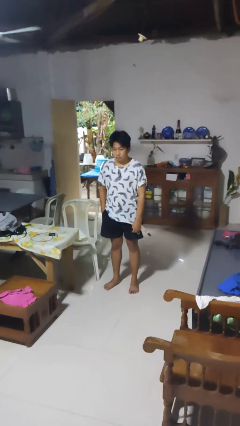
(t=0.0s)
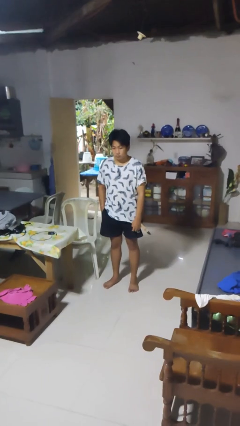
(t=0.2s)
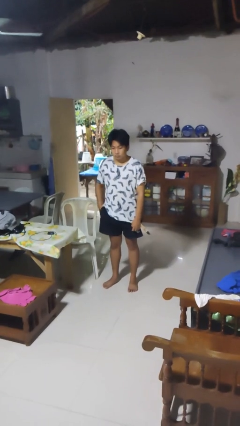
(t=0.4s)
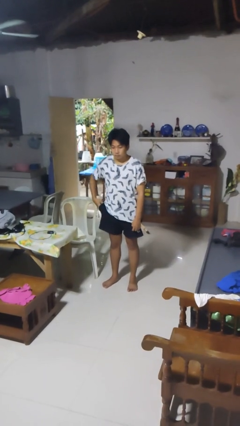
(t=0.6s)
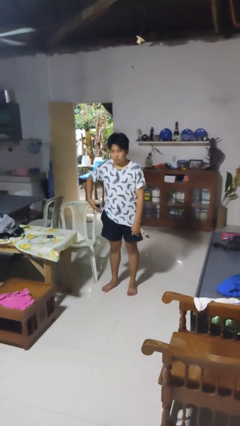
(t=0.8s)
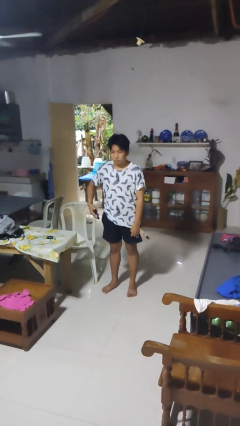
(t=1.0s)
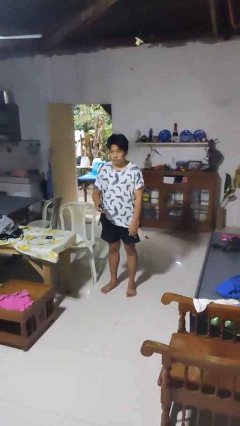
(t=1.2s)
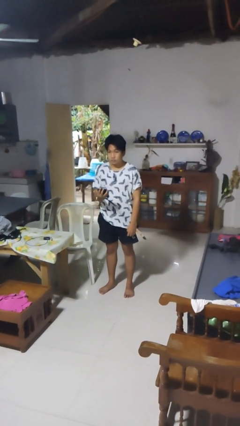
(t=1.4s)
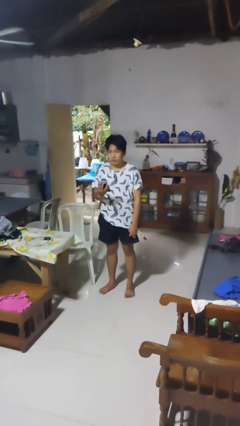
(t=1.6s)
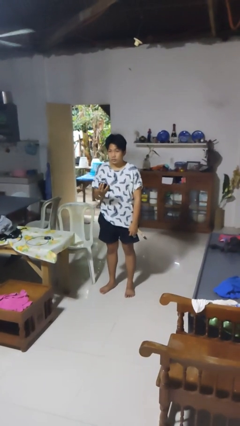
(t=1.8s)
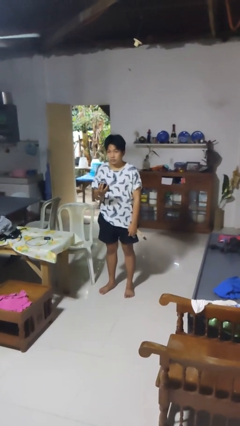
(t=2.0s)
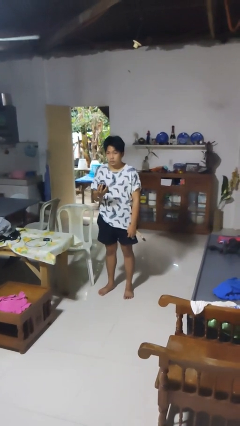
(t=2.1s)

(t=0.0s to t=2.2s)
person takes phone from pocket

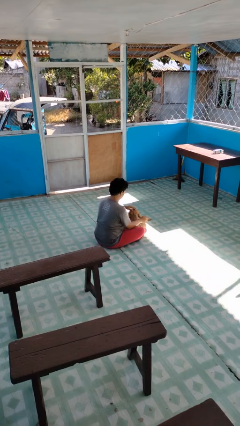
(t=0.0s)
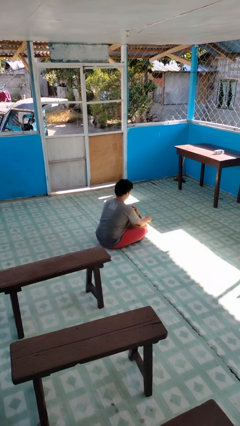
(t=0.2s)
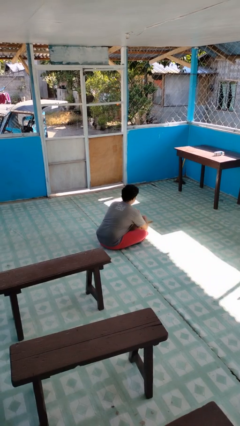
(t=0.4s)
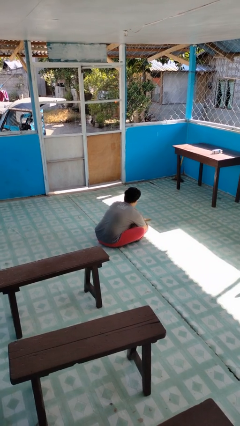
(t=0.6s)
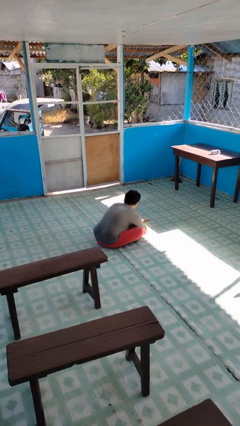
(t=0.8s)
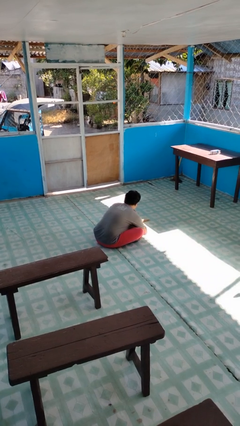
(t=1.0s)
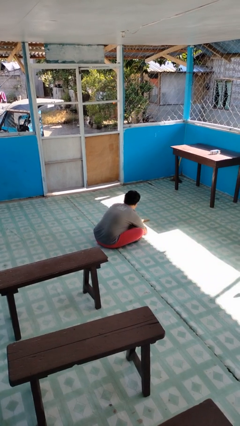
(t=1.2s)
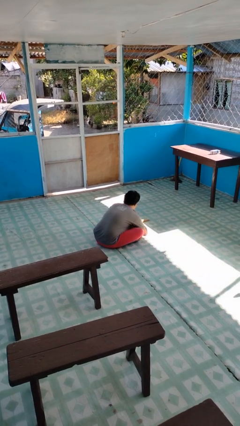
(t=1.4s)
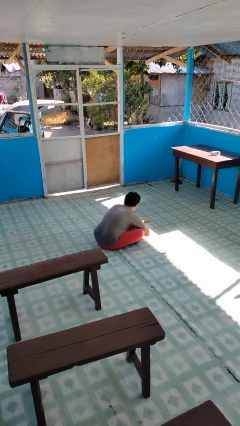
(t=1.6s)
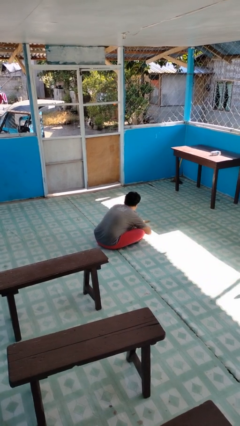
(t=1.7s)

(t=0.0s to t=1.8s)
person hugs dog

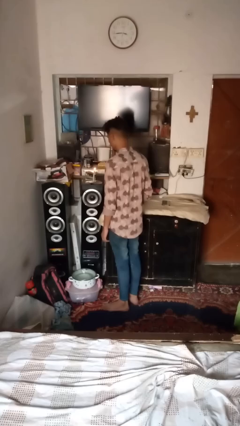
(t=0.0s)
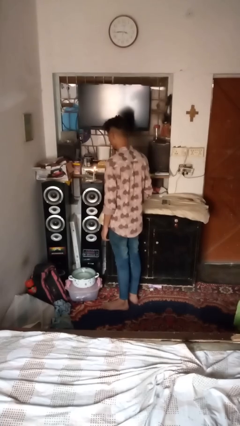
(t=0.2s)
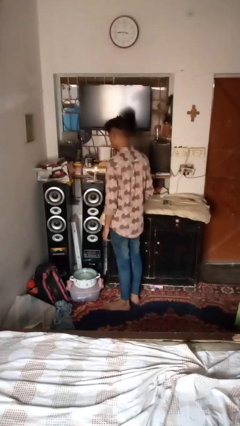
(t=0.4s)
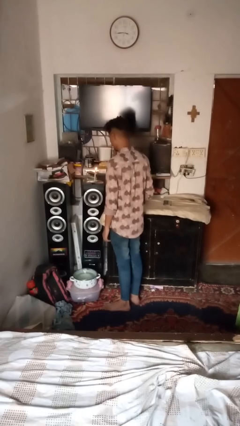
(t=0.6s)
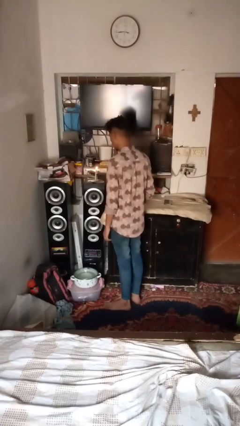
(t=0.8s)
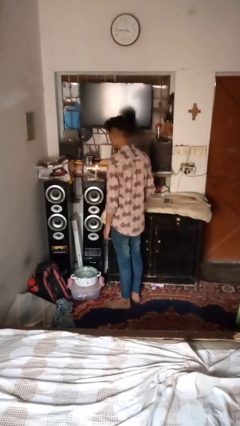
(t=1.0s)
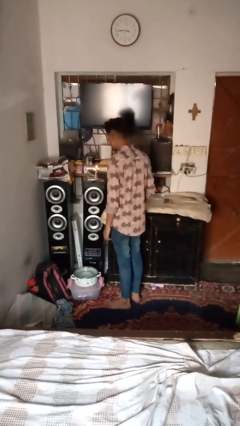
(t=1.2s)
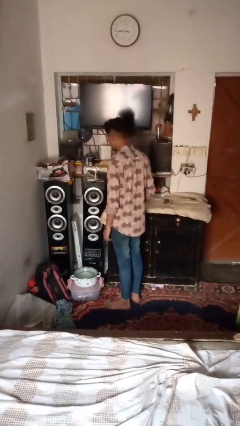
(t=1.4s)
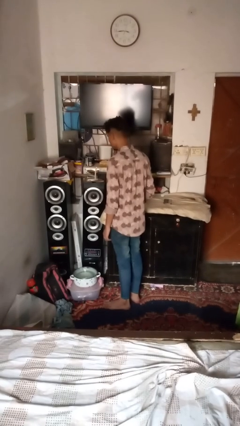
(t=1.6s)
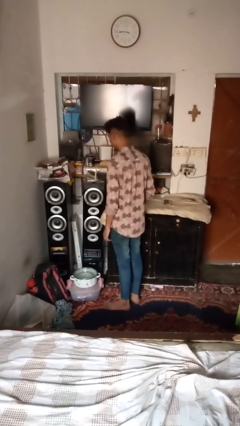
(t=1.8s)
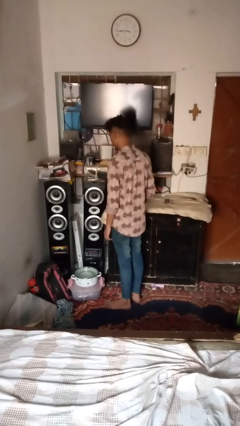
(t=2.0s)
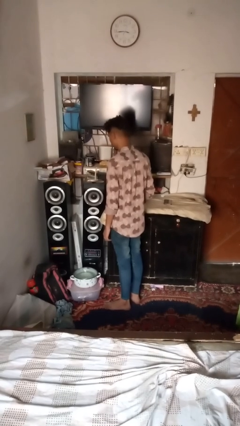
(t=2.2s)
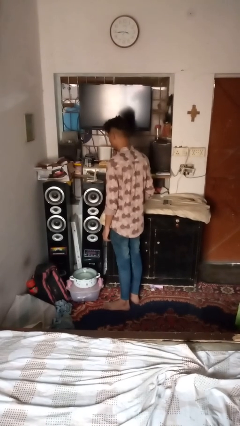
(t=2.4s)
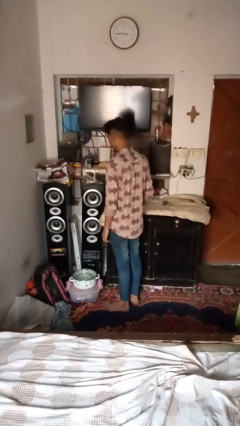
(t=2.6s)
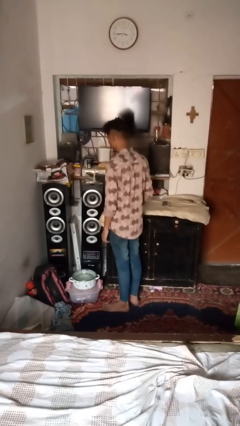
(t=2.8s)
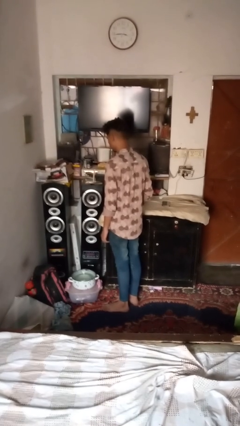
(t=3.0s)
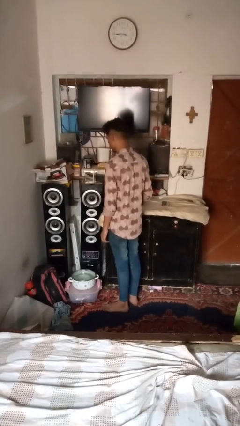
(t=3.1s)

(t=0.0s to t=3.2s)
person extinguishes candle

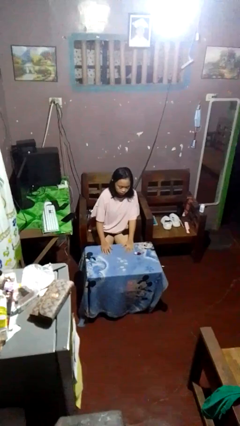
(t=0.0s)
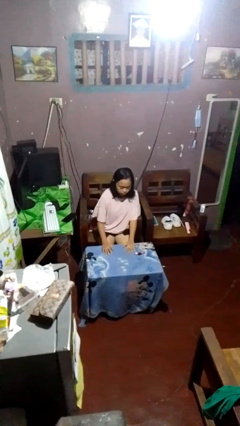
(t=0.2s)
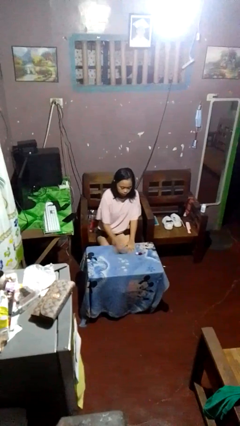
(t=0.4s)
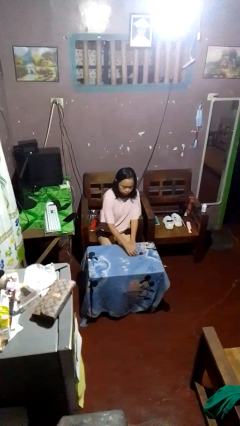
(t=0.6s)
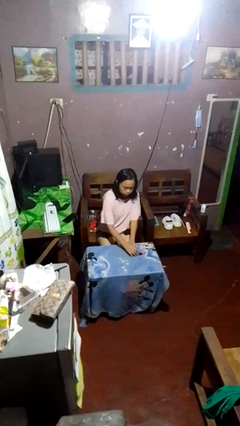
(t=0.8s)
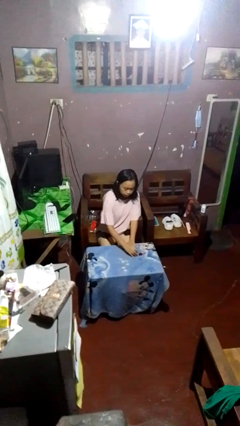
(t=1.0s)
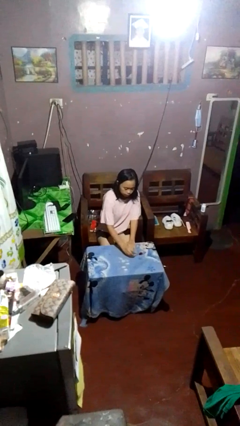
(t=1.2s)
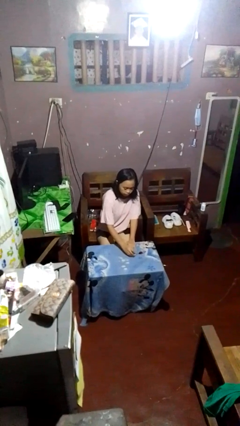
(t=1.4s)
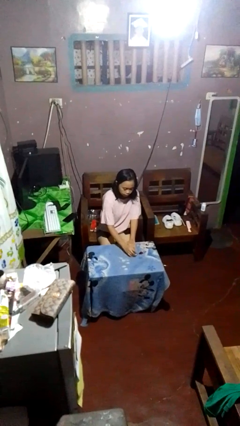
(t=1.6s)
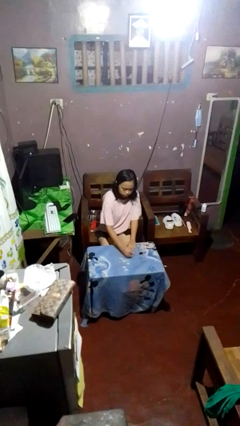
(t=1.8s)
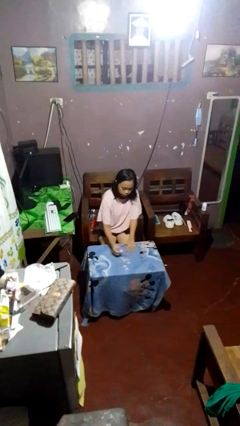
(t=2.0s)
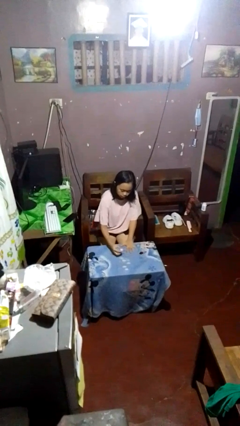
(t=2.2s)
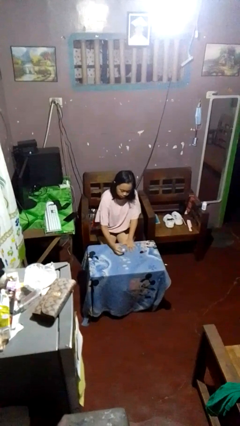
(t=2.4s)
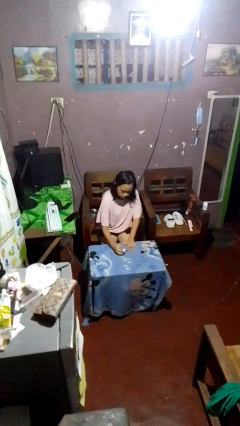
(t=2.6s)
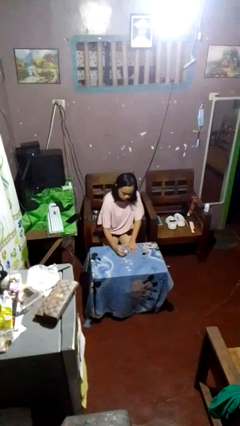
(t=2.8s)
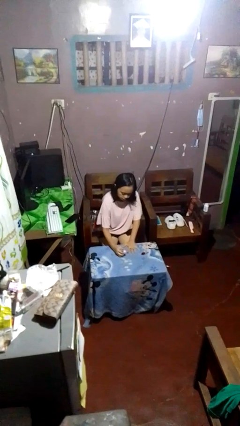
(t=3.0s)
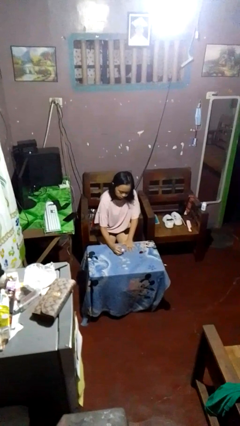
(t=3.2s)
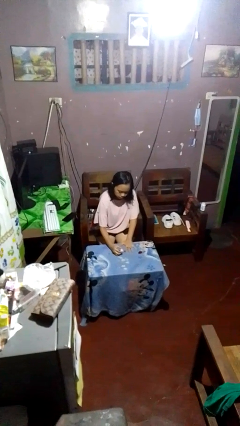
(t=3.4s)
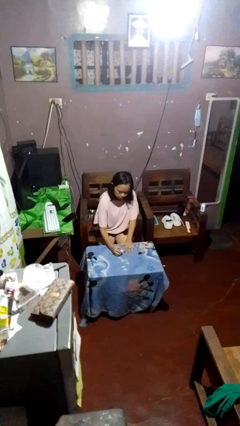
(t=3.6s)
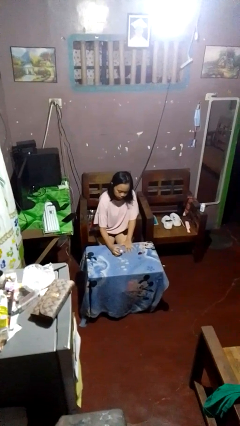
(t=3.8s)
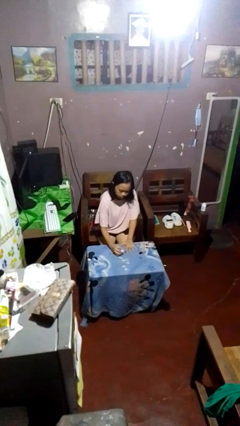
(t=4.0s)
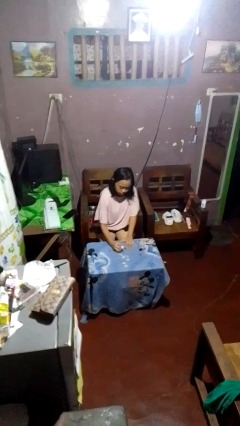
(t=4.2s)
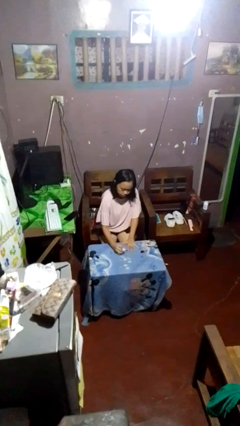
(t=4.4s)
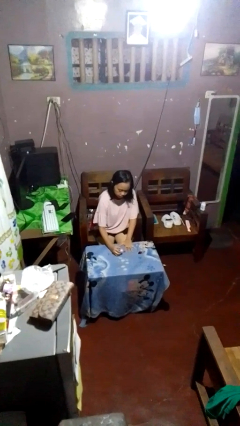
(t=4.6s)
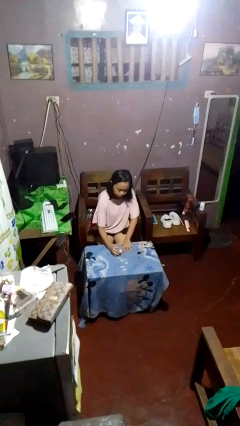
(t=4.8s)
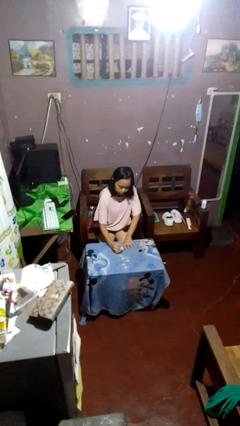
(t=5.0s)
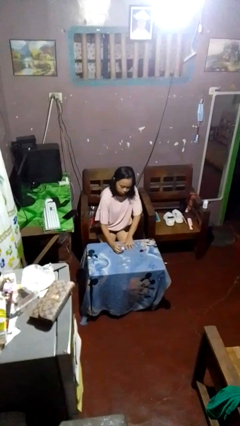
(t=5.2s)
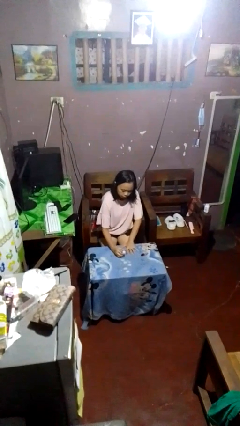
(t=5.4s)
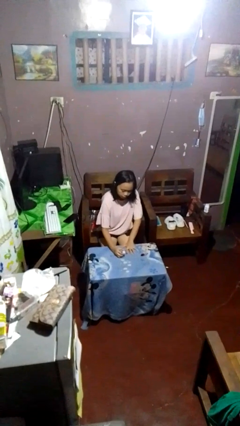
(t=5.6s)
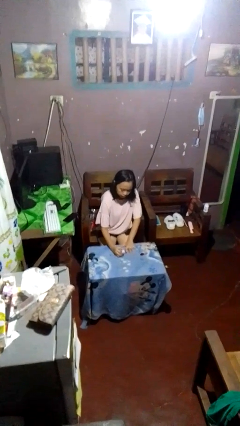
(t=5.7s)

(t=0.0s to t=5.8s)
person paints fingernails

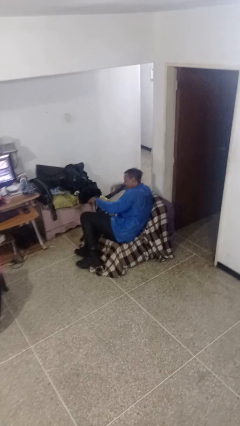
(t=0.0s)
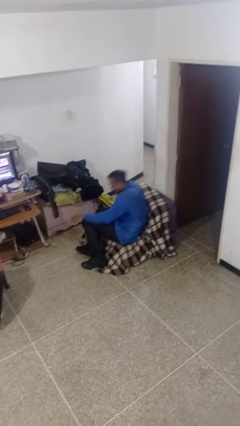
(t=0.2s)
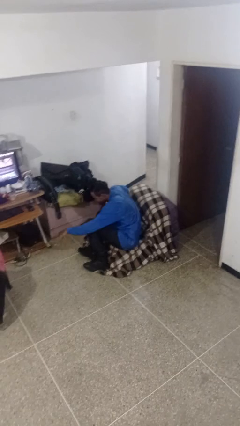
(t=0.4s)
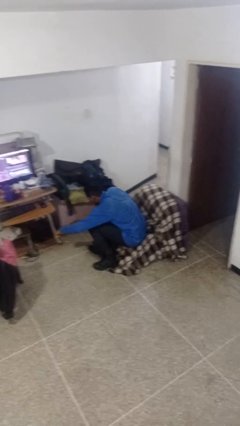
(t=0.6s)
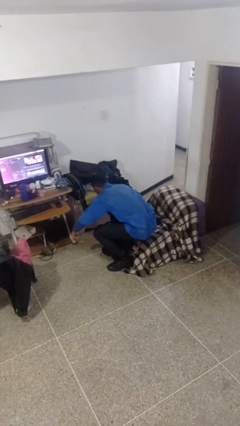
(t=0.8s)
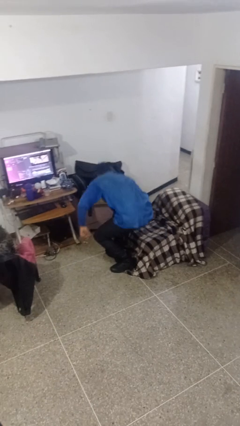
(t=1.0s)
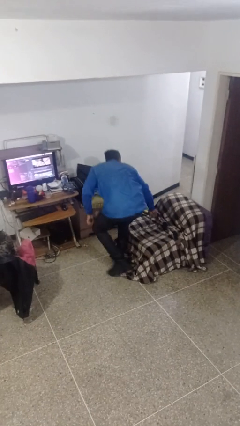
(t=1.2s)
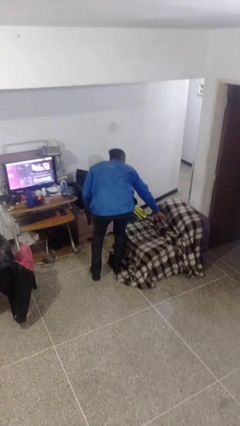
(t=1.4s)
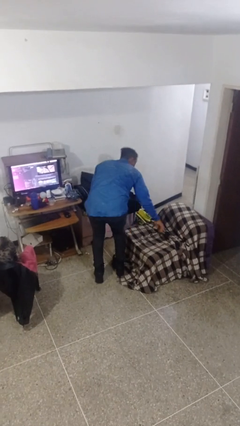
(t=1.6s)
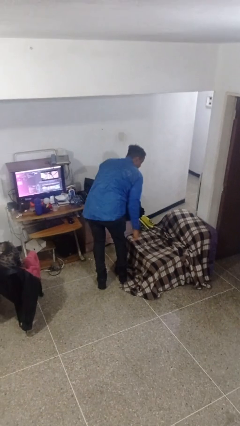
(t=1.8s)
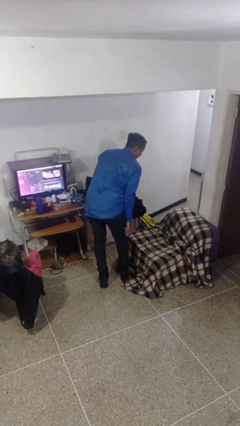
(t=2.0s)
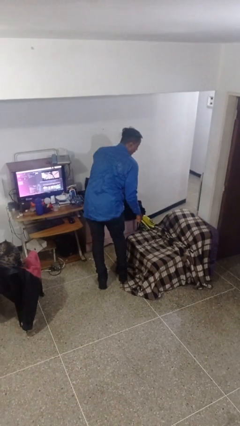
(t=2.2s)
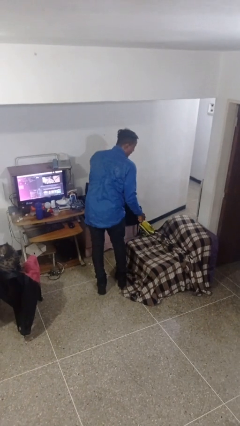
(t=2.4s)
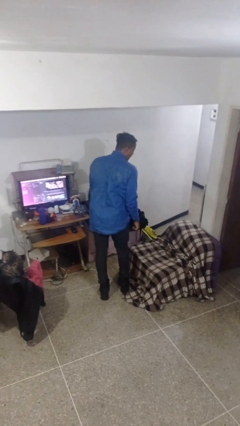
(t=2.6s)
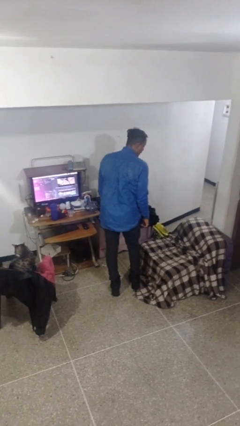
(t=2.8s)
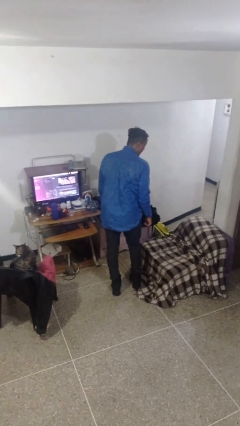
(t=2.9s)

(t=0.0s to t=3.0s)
person stands up

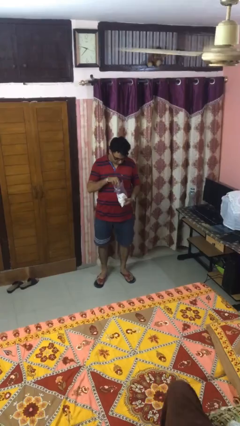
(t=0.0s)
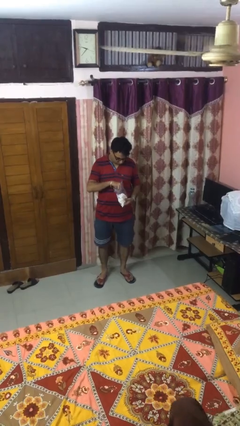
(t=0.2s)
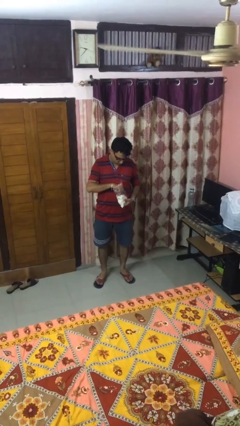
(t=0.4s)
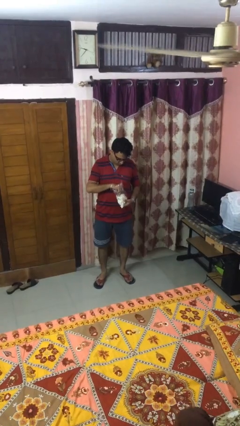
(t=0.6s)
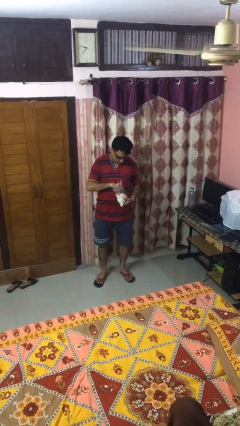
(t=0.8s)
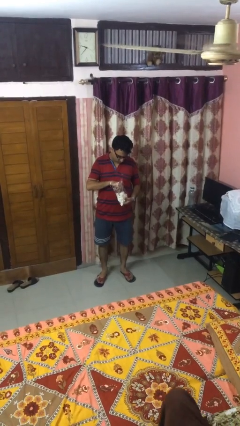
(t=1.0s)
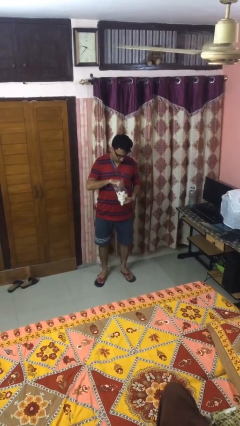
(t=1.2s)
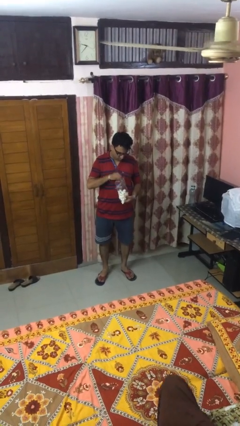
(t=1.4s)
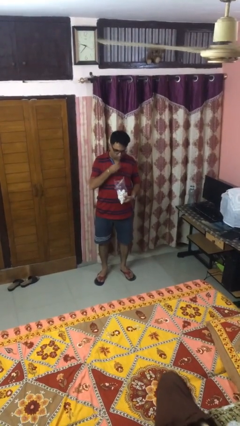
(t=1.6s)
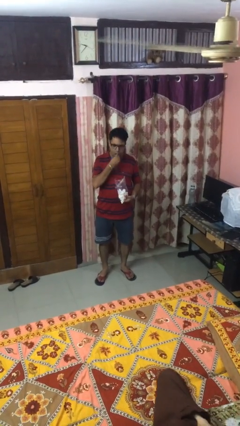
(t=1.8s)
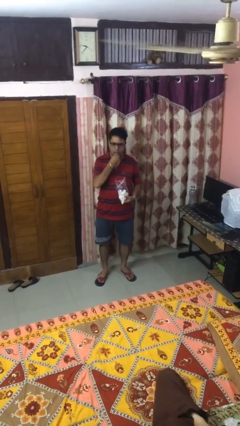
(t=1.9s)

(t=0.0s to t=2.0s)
person eats snack from bag
